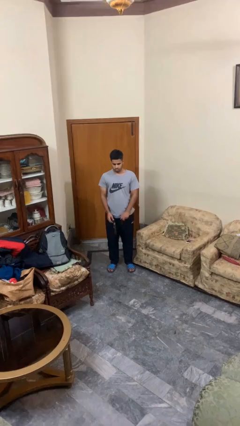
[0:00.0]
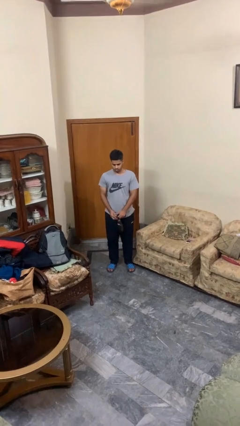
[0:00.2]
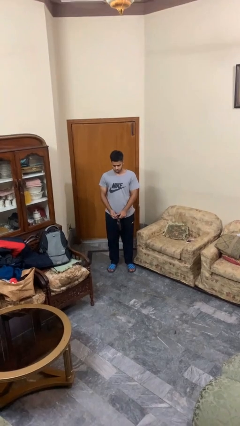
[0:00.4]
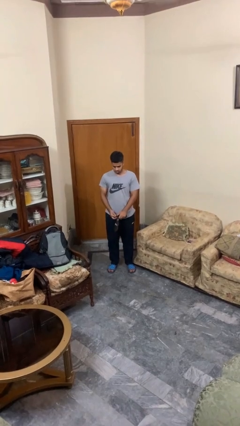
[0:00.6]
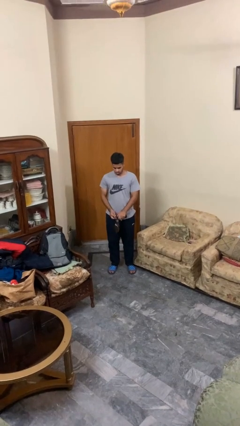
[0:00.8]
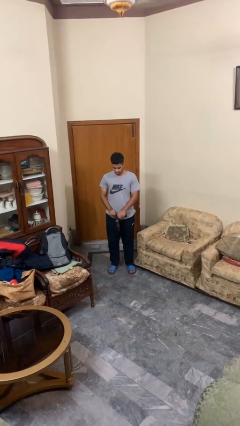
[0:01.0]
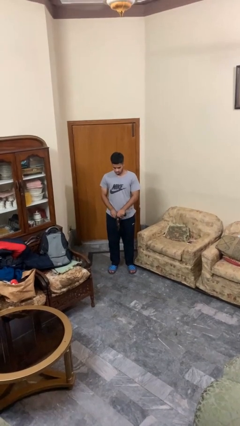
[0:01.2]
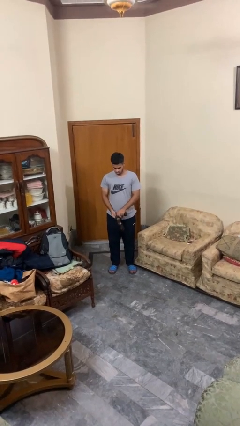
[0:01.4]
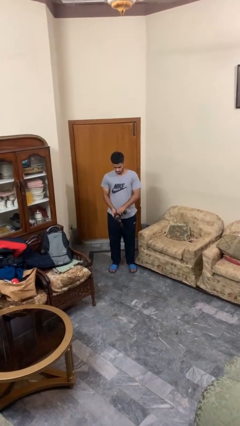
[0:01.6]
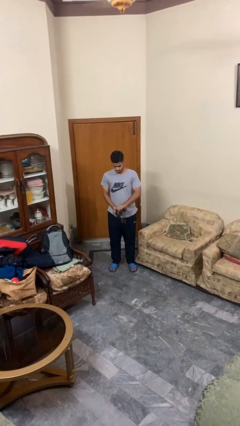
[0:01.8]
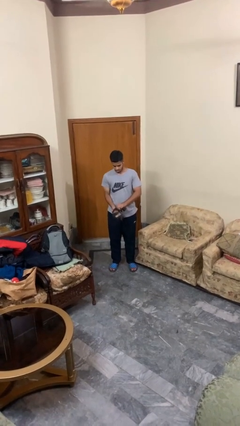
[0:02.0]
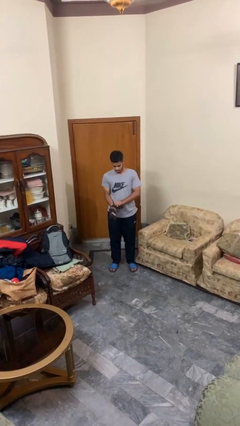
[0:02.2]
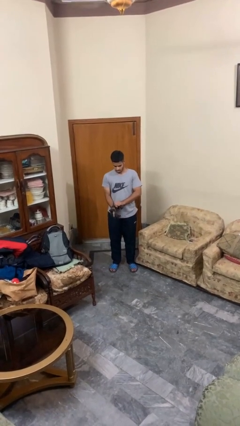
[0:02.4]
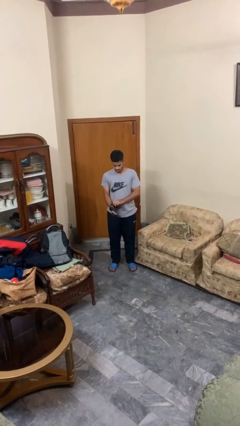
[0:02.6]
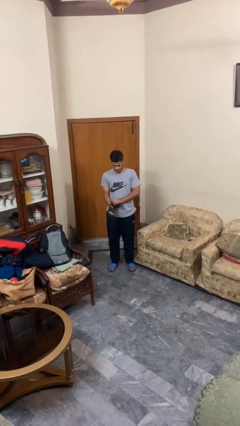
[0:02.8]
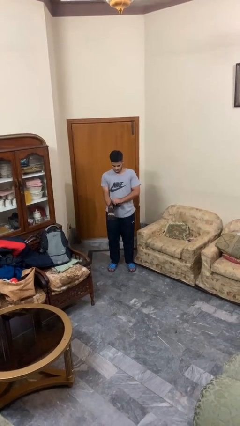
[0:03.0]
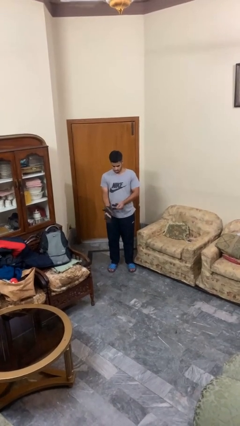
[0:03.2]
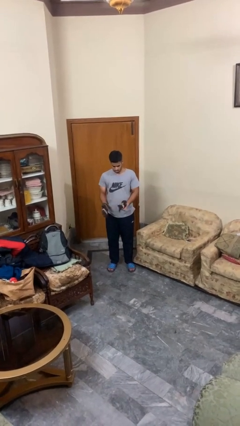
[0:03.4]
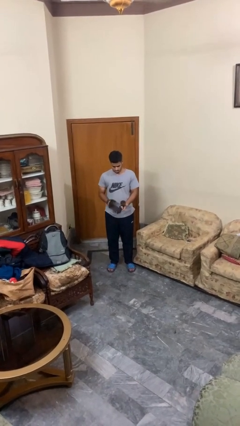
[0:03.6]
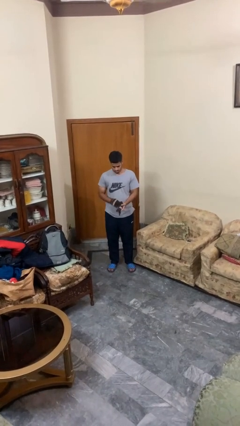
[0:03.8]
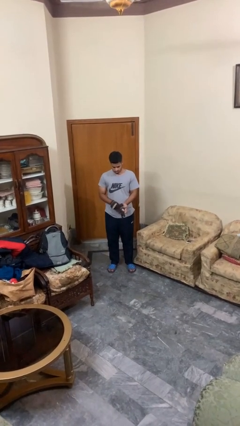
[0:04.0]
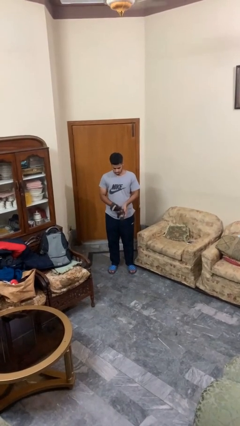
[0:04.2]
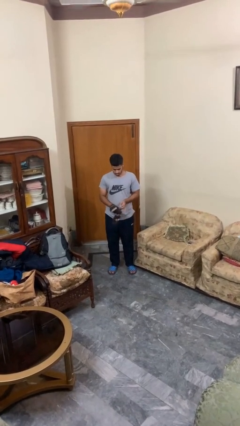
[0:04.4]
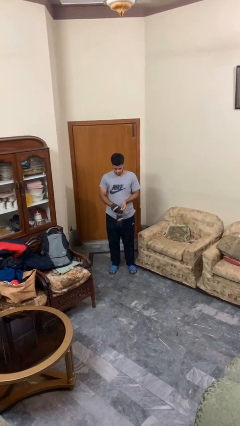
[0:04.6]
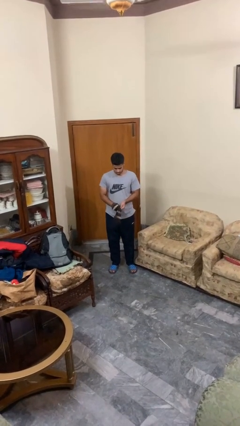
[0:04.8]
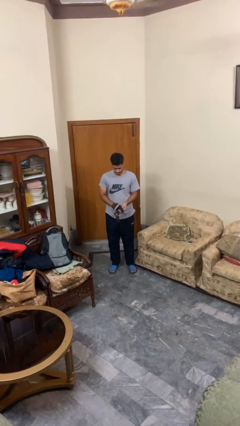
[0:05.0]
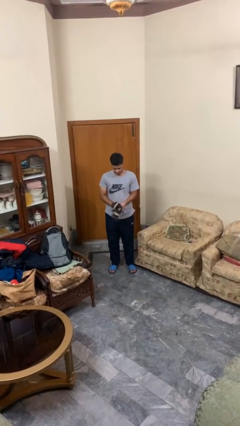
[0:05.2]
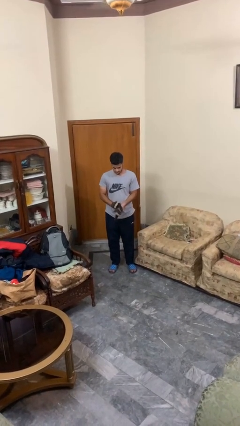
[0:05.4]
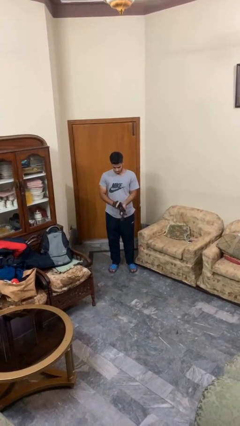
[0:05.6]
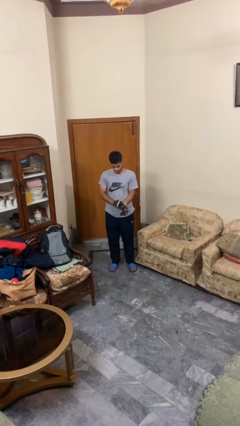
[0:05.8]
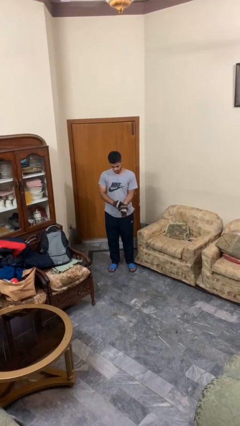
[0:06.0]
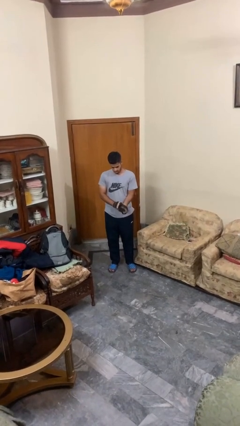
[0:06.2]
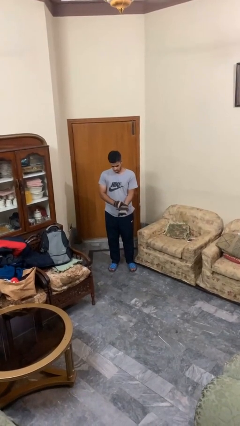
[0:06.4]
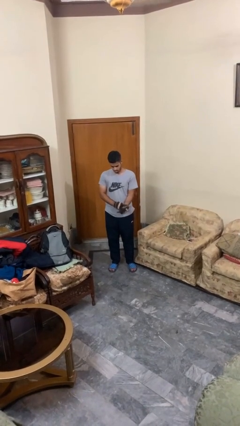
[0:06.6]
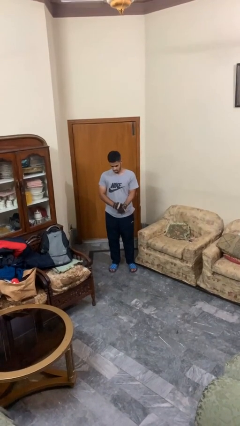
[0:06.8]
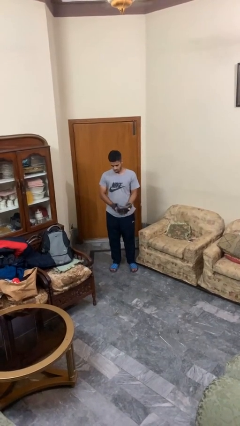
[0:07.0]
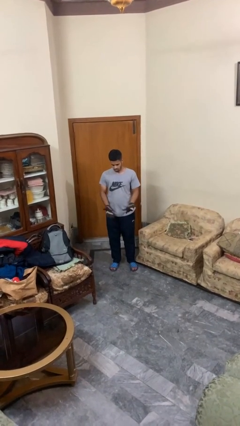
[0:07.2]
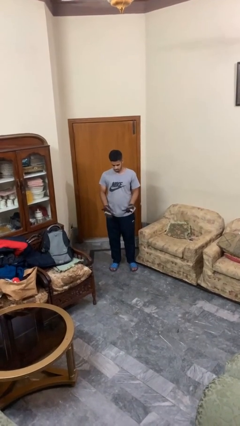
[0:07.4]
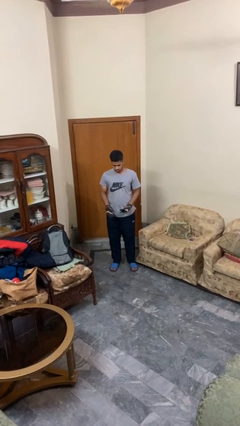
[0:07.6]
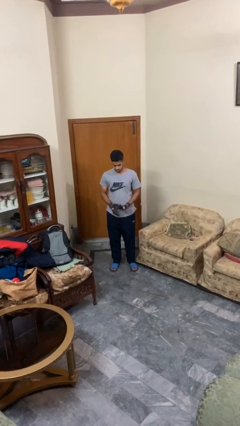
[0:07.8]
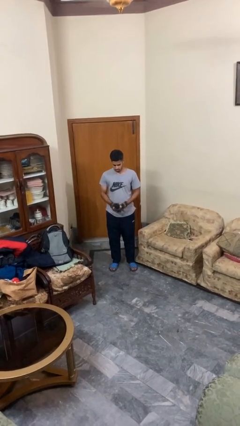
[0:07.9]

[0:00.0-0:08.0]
person puts on gloves

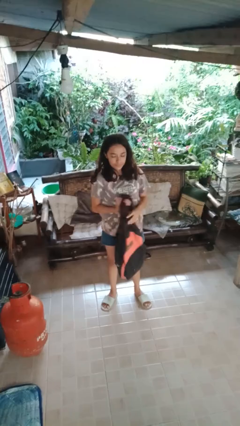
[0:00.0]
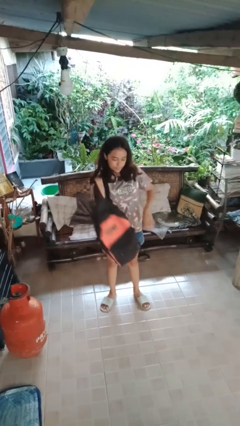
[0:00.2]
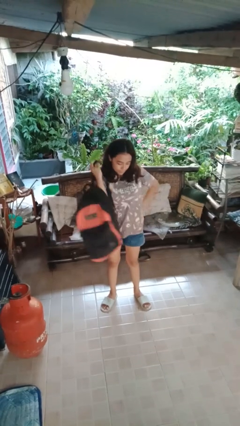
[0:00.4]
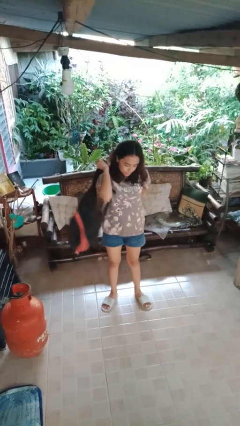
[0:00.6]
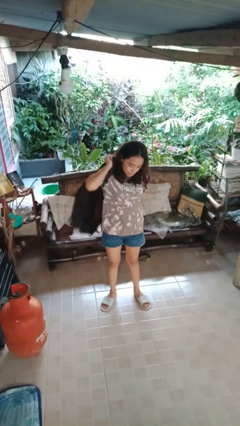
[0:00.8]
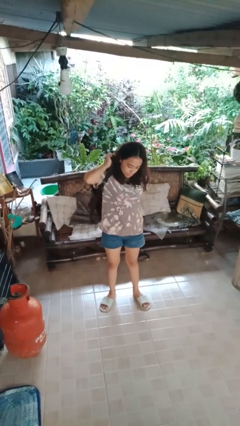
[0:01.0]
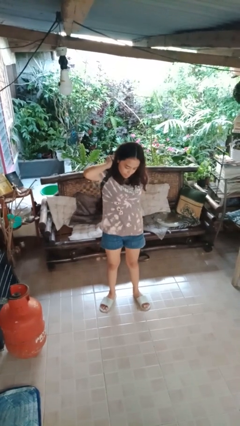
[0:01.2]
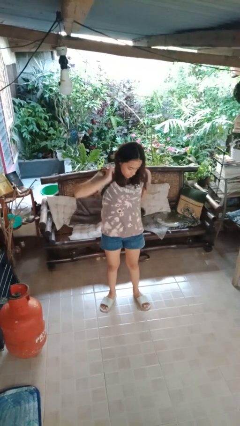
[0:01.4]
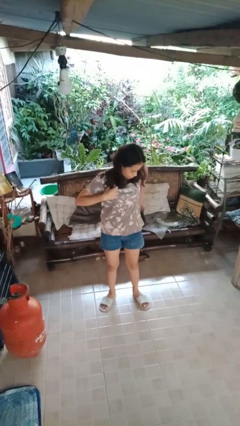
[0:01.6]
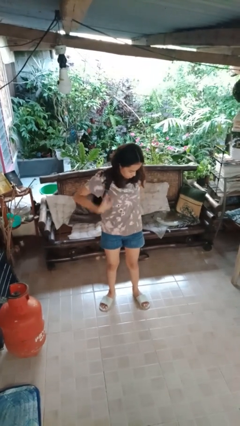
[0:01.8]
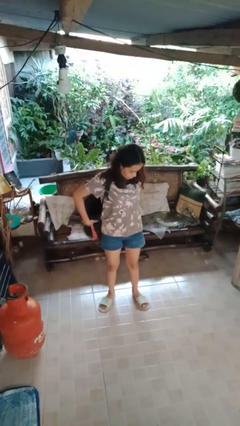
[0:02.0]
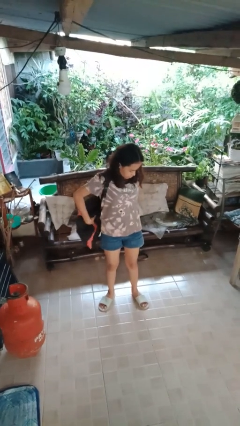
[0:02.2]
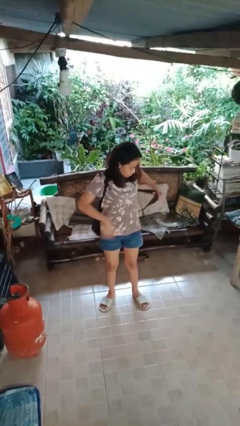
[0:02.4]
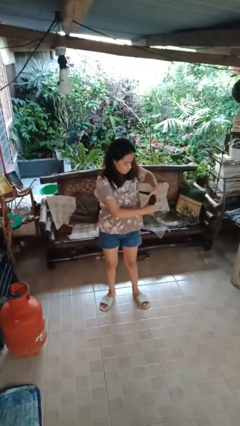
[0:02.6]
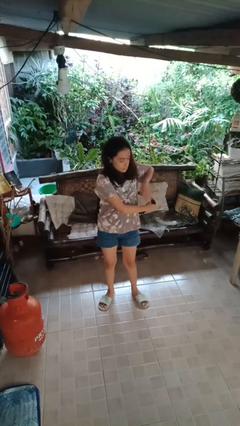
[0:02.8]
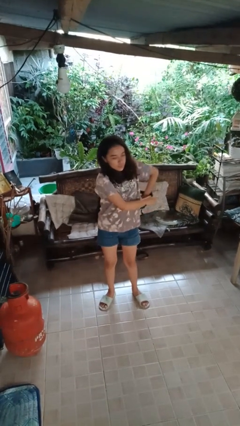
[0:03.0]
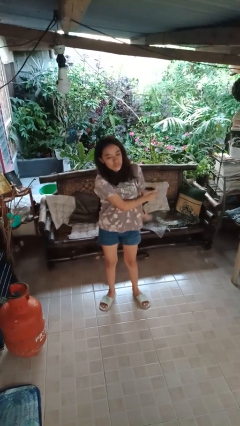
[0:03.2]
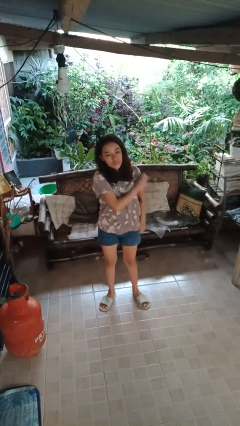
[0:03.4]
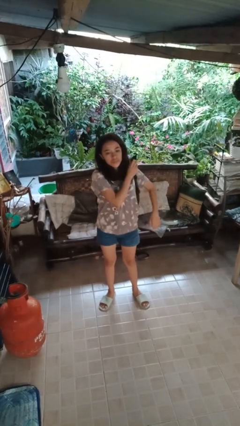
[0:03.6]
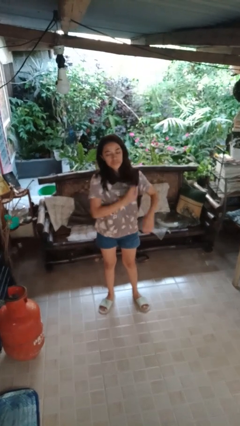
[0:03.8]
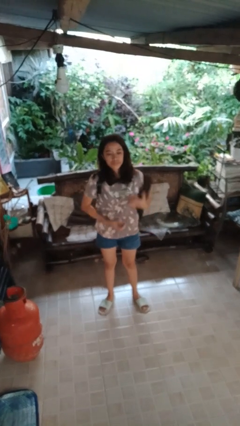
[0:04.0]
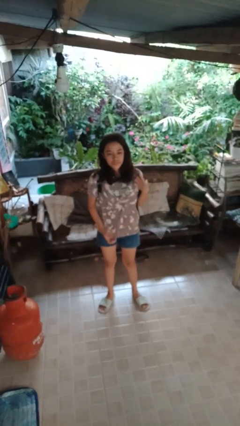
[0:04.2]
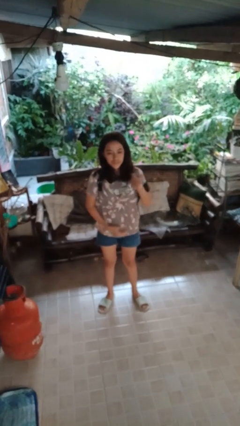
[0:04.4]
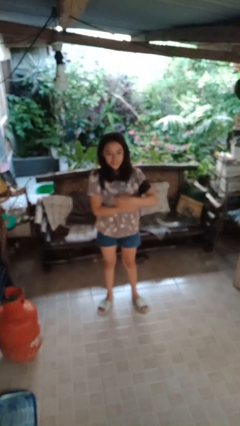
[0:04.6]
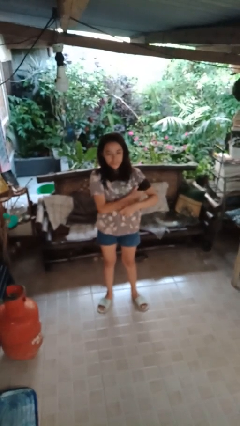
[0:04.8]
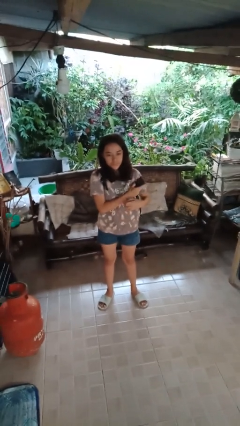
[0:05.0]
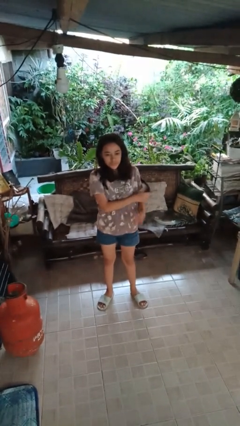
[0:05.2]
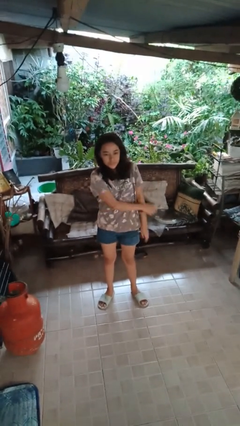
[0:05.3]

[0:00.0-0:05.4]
person puts on backpack

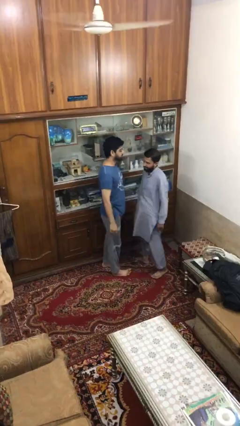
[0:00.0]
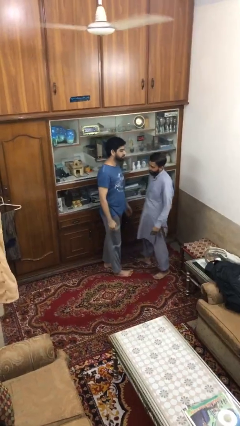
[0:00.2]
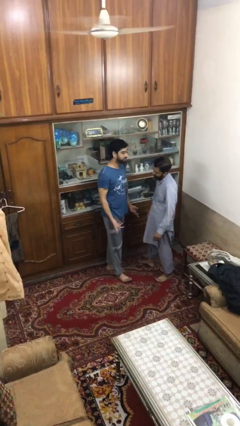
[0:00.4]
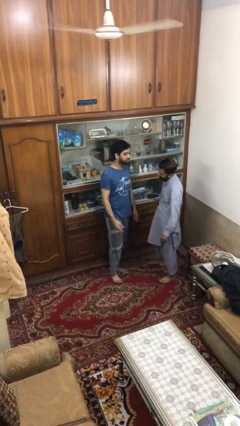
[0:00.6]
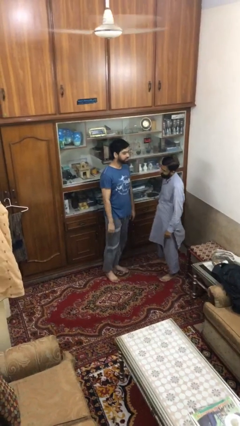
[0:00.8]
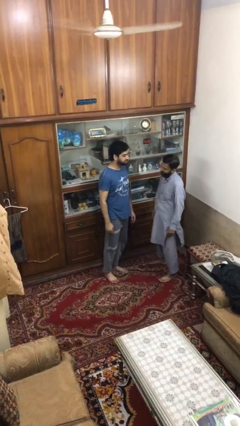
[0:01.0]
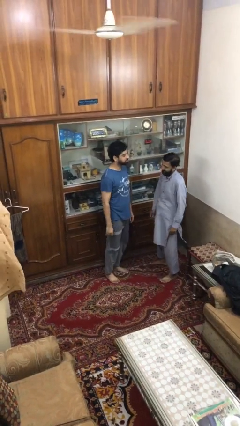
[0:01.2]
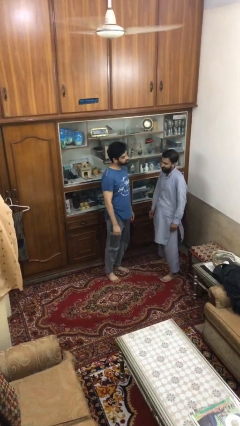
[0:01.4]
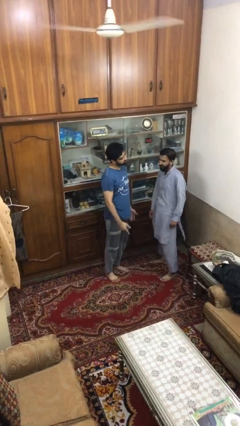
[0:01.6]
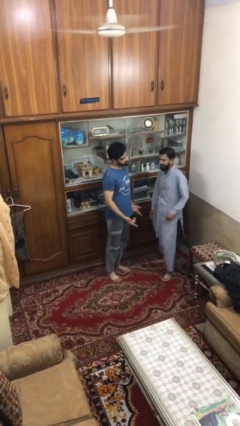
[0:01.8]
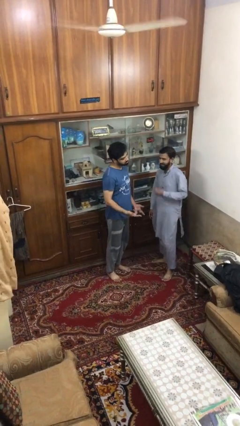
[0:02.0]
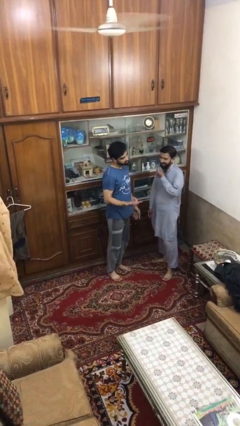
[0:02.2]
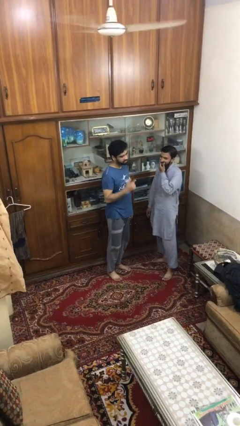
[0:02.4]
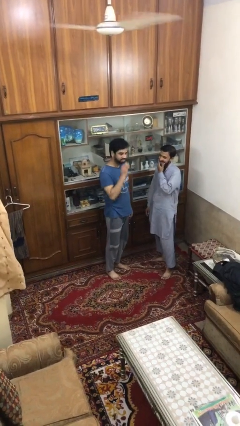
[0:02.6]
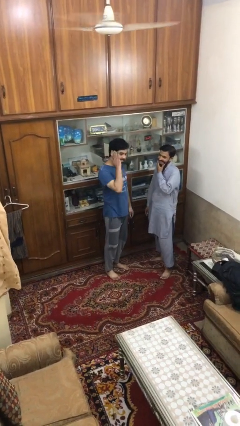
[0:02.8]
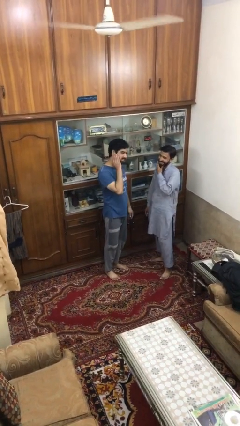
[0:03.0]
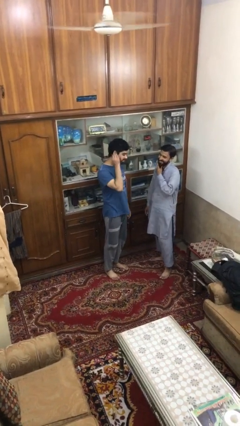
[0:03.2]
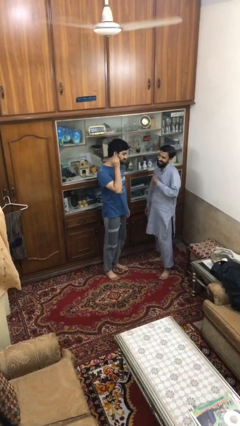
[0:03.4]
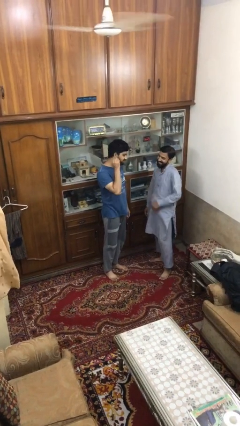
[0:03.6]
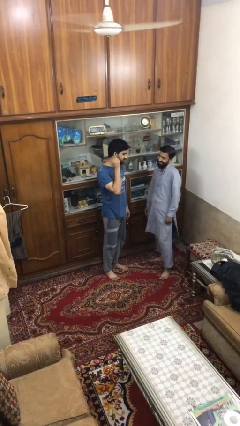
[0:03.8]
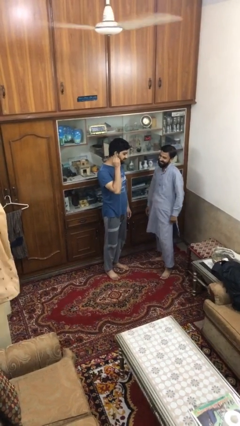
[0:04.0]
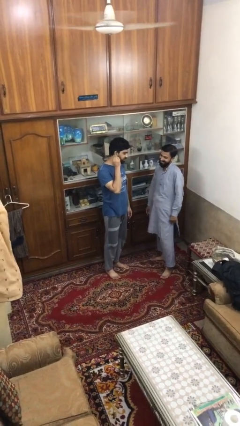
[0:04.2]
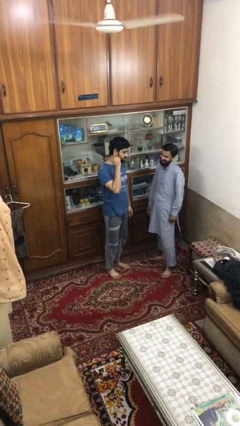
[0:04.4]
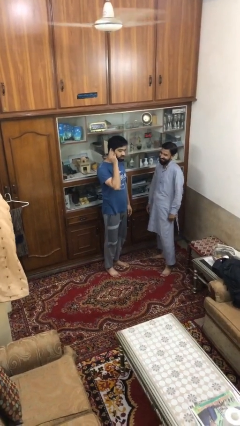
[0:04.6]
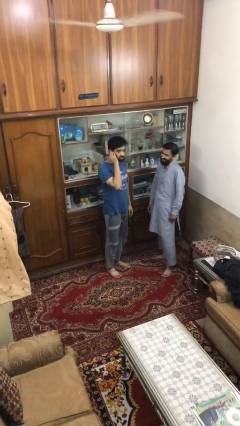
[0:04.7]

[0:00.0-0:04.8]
person talks to person
